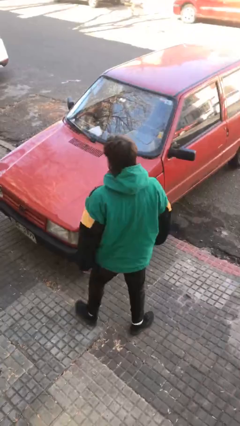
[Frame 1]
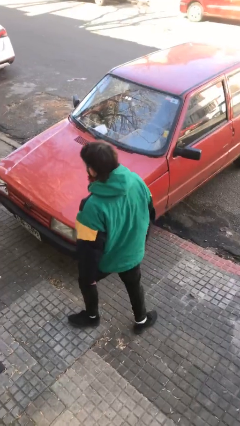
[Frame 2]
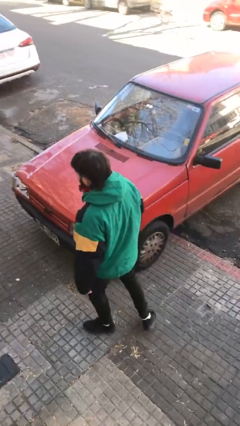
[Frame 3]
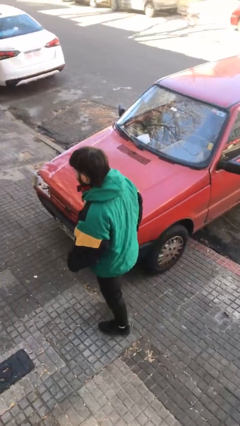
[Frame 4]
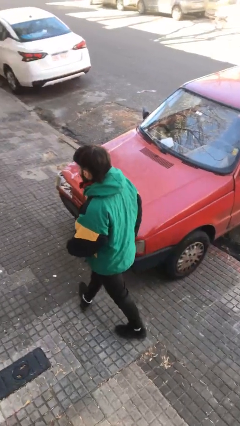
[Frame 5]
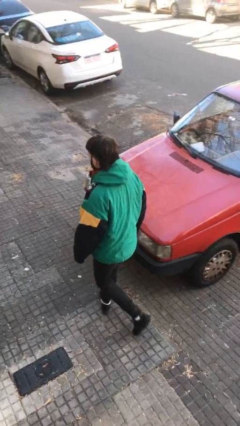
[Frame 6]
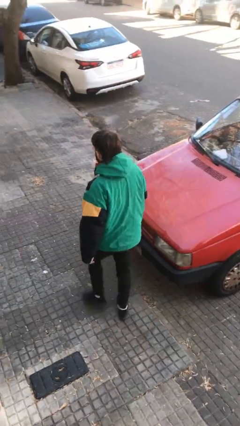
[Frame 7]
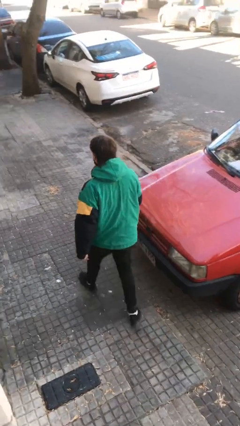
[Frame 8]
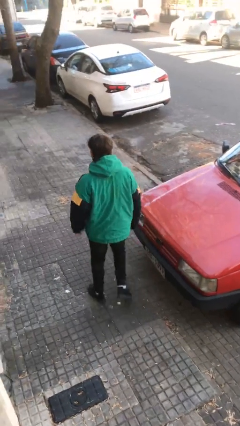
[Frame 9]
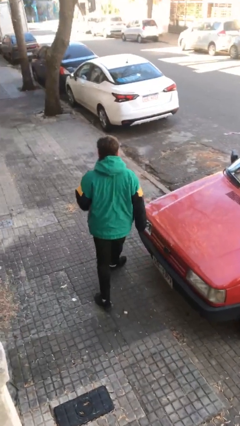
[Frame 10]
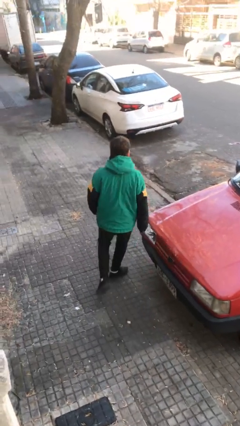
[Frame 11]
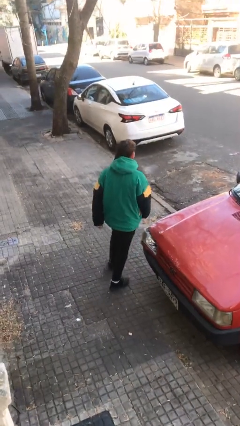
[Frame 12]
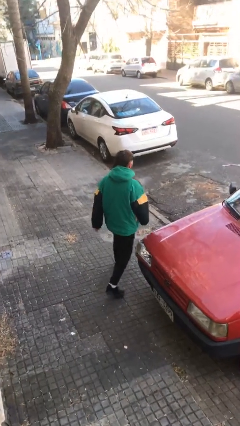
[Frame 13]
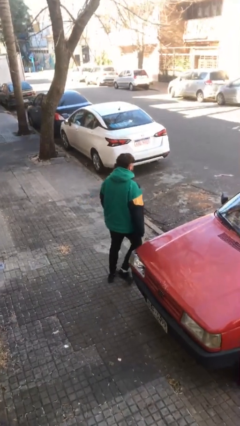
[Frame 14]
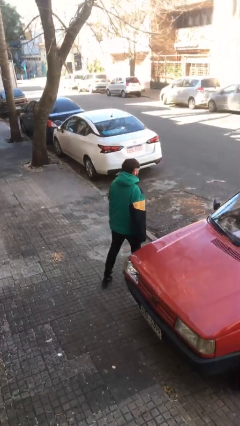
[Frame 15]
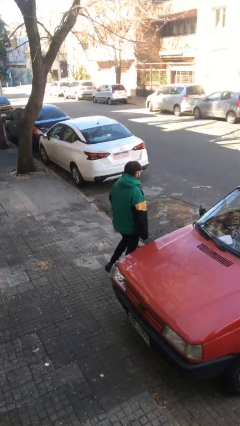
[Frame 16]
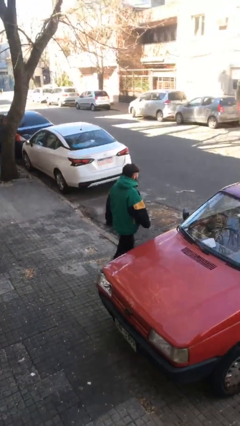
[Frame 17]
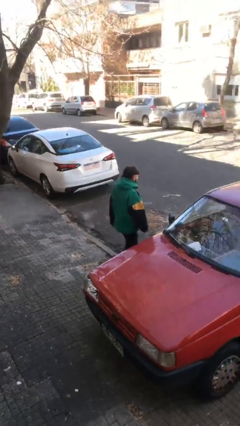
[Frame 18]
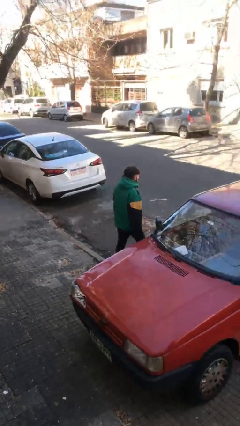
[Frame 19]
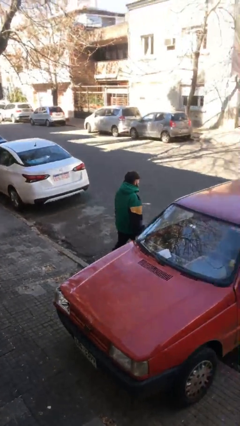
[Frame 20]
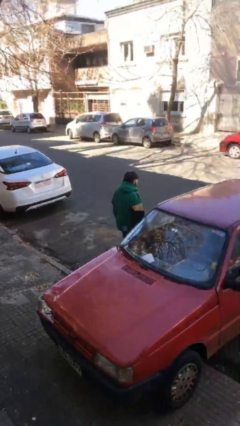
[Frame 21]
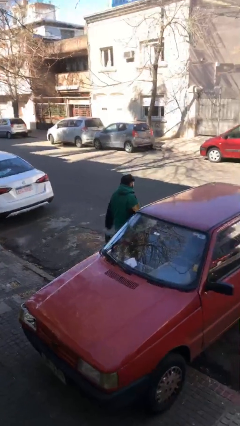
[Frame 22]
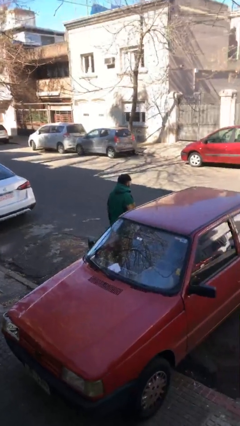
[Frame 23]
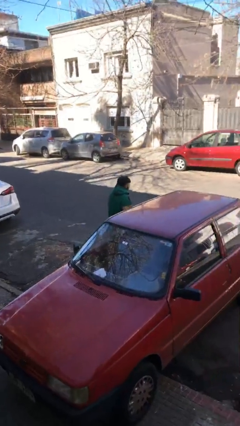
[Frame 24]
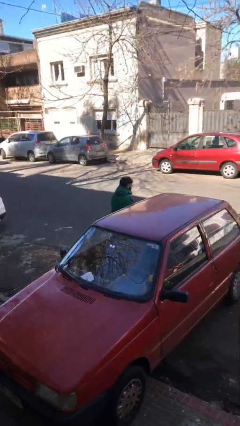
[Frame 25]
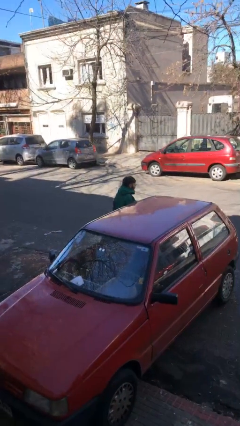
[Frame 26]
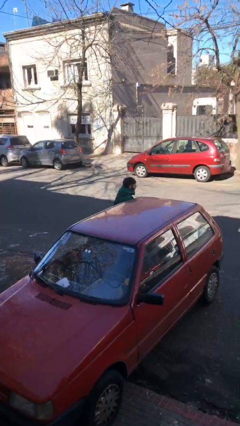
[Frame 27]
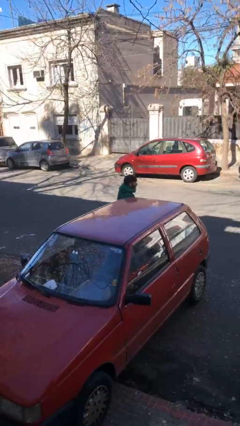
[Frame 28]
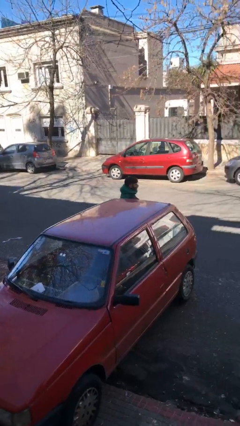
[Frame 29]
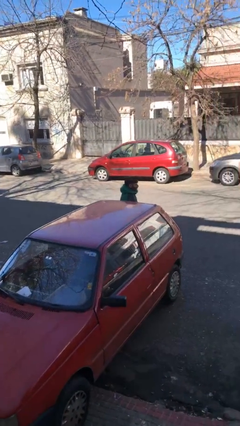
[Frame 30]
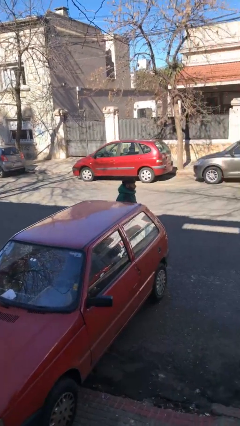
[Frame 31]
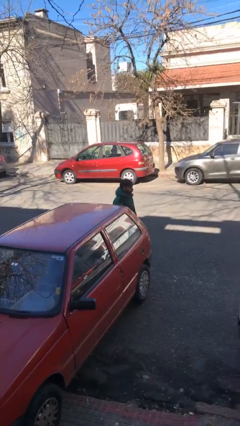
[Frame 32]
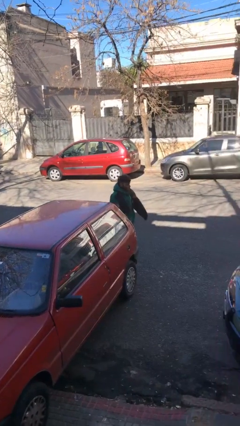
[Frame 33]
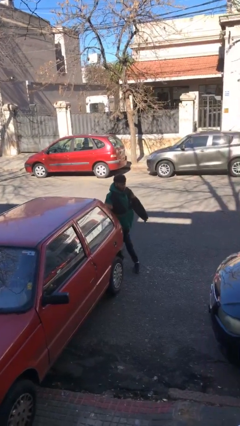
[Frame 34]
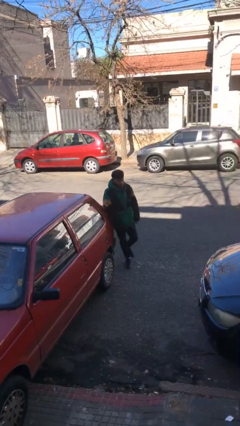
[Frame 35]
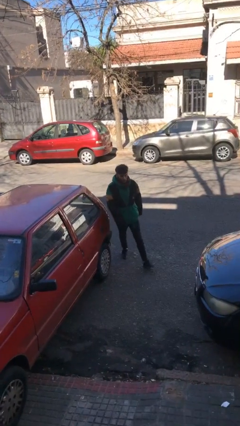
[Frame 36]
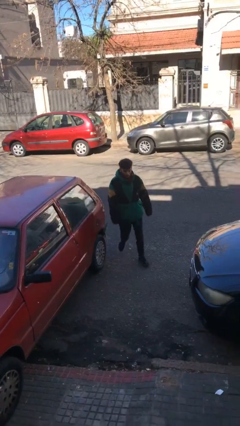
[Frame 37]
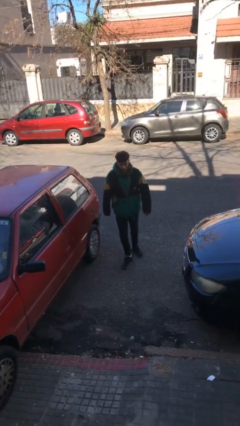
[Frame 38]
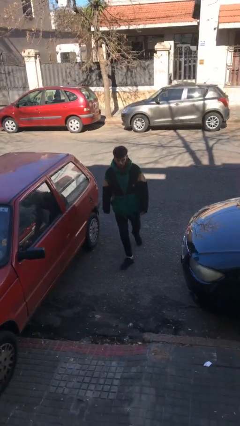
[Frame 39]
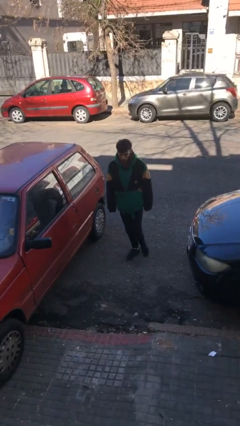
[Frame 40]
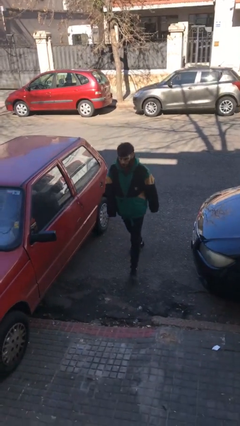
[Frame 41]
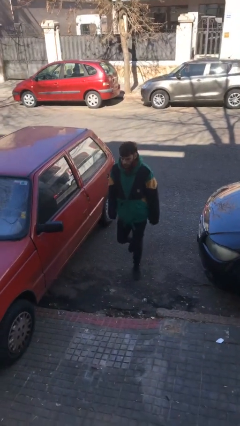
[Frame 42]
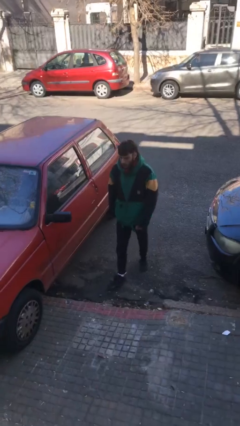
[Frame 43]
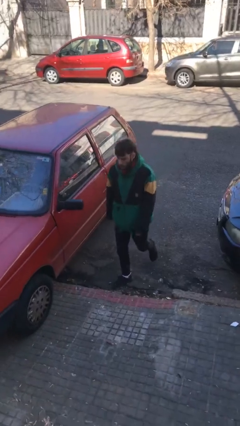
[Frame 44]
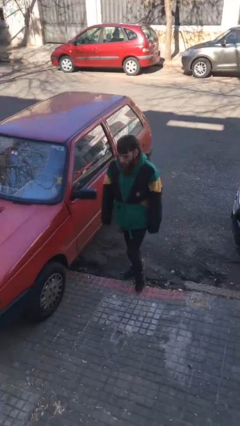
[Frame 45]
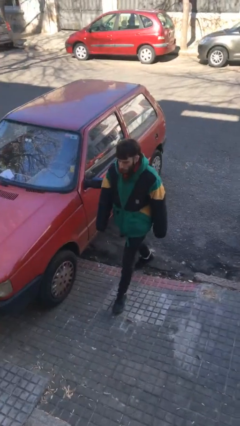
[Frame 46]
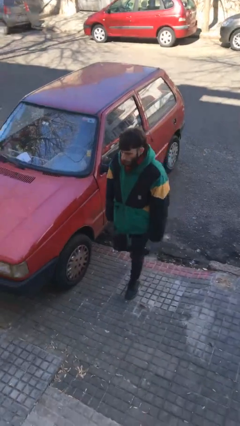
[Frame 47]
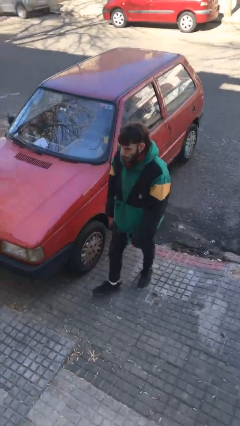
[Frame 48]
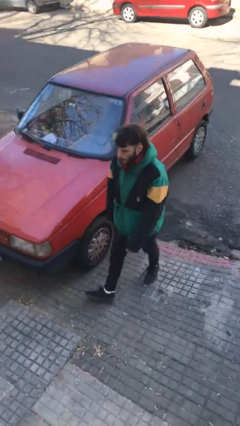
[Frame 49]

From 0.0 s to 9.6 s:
person walks around car

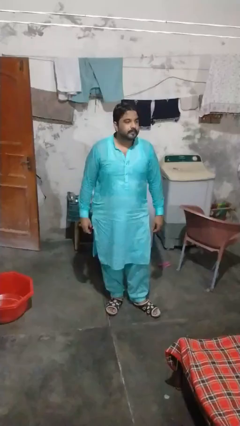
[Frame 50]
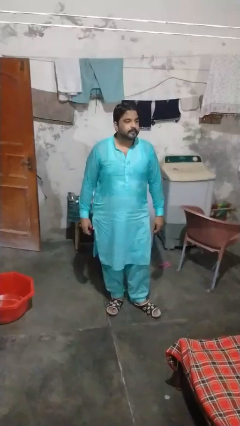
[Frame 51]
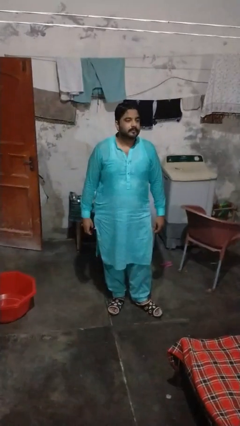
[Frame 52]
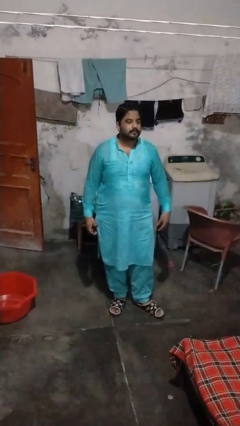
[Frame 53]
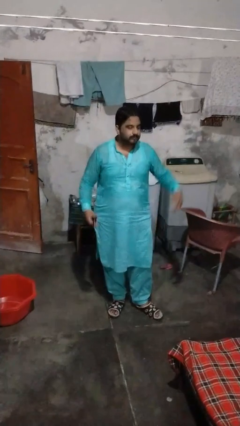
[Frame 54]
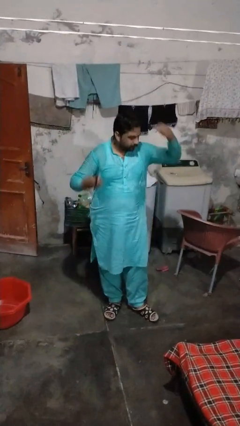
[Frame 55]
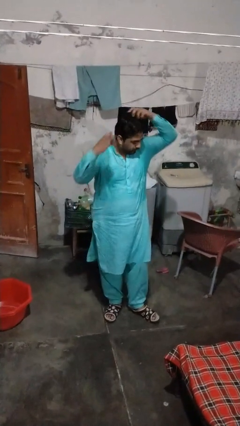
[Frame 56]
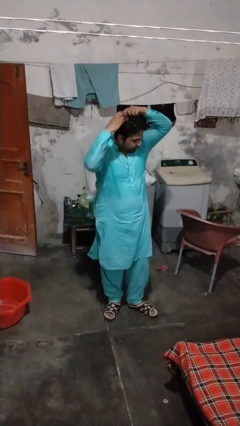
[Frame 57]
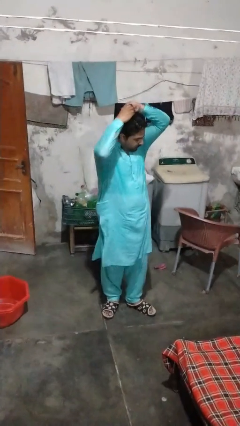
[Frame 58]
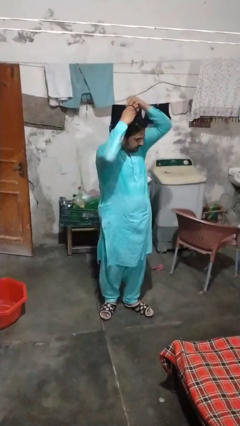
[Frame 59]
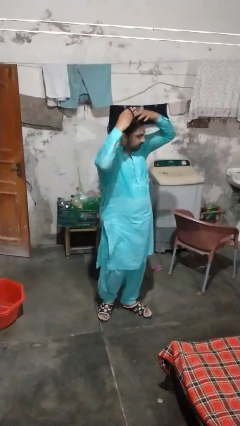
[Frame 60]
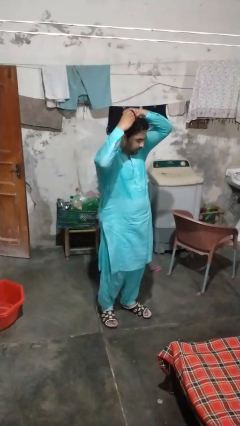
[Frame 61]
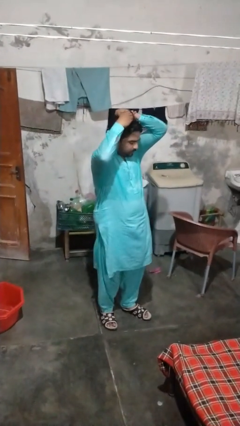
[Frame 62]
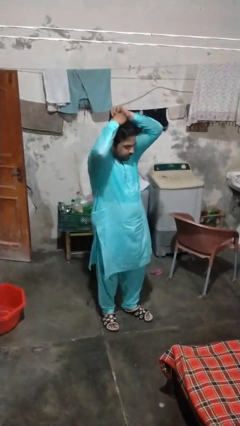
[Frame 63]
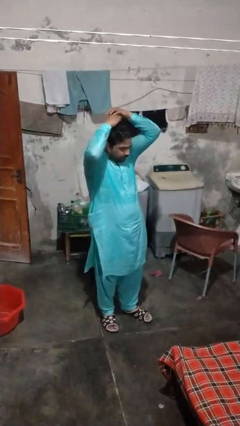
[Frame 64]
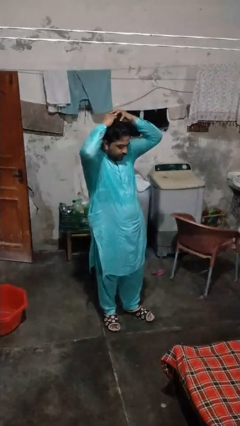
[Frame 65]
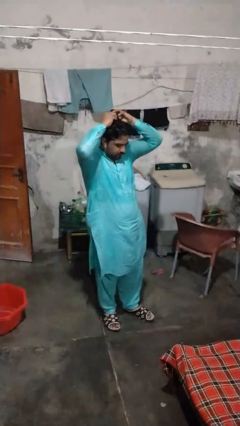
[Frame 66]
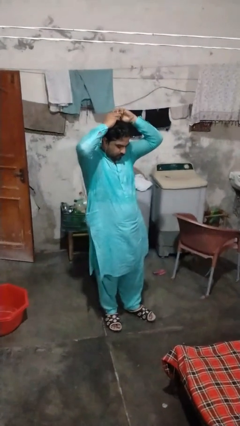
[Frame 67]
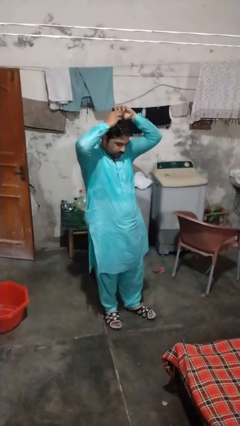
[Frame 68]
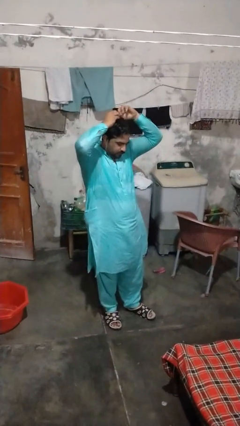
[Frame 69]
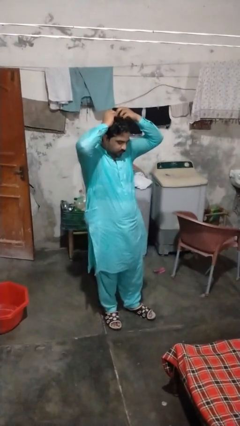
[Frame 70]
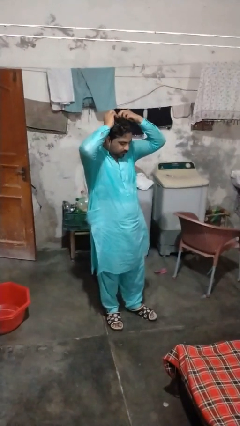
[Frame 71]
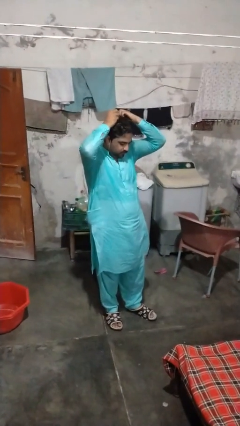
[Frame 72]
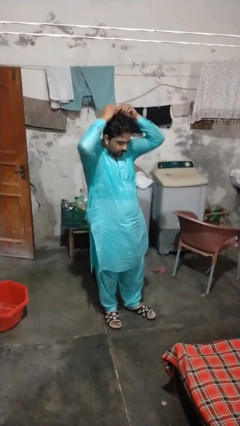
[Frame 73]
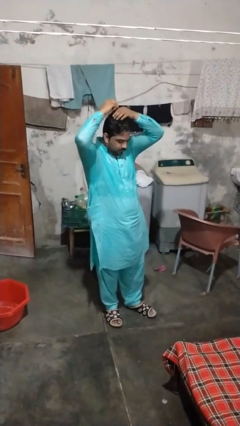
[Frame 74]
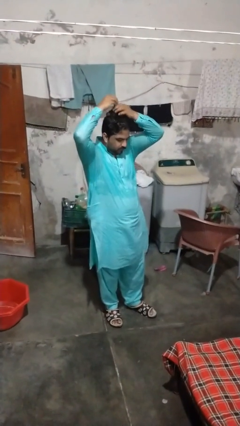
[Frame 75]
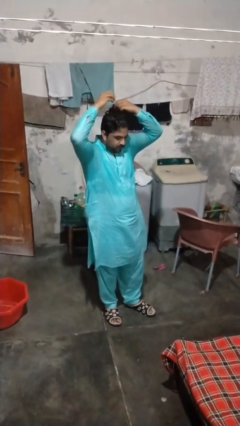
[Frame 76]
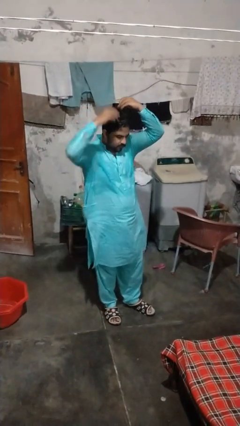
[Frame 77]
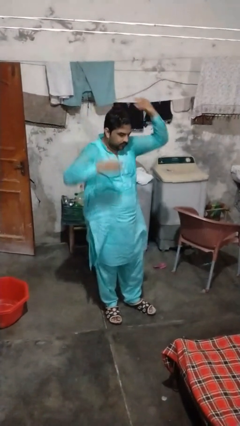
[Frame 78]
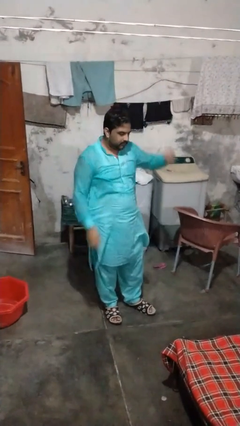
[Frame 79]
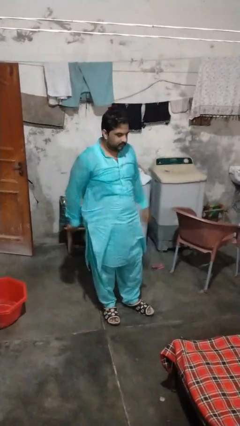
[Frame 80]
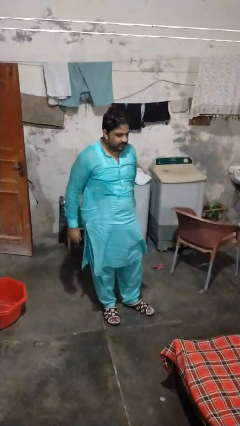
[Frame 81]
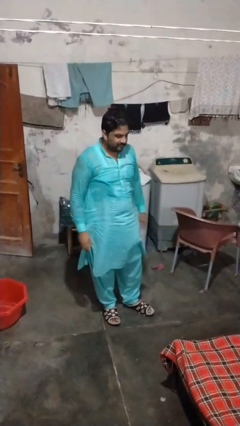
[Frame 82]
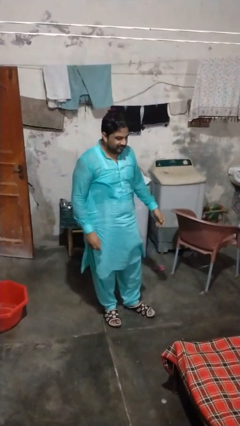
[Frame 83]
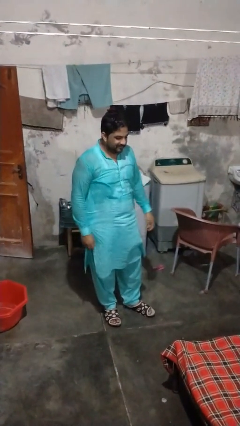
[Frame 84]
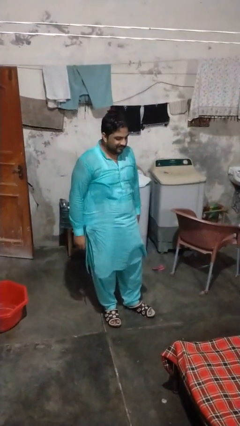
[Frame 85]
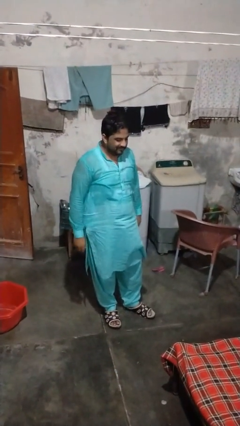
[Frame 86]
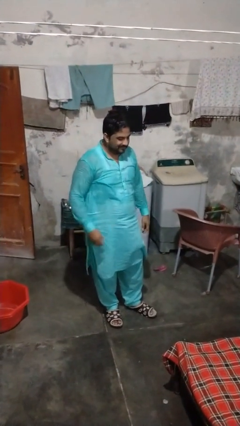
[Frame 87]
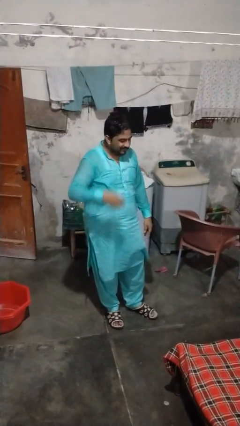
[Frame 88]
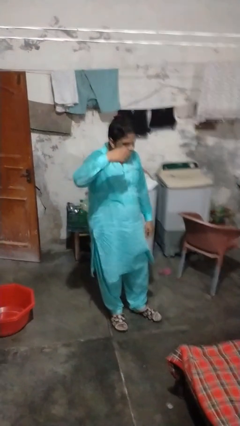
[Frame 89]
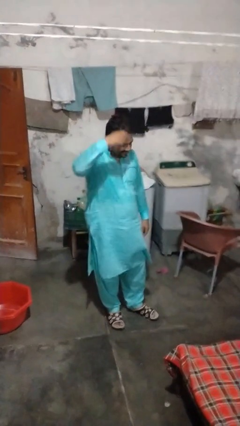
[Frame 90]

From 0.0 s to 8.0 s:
person puts hair in ponytail
